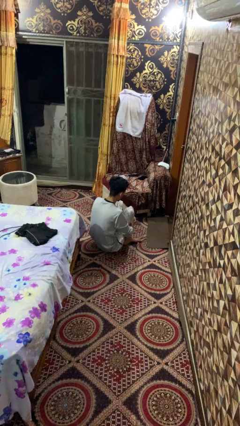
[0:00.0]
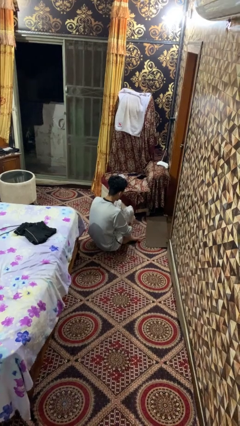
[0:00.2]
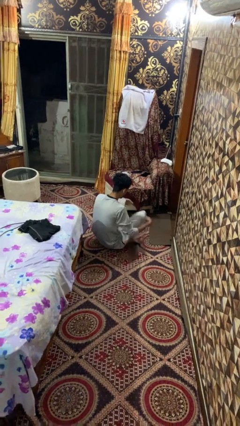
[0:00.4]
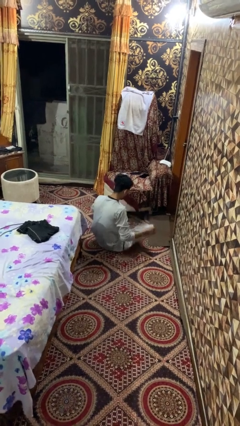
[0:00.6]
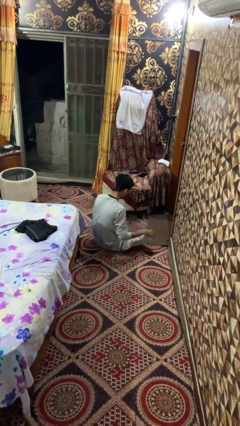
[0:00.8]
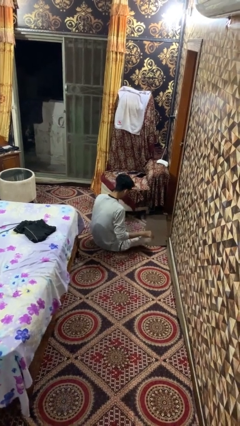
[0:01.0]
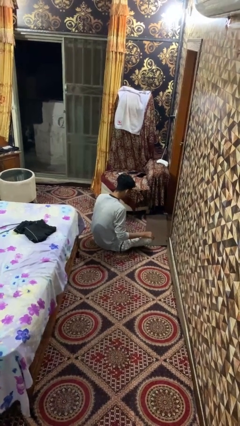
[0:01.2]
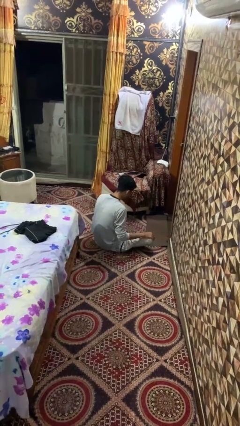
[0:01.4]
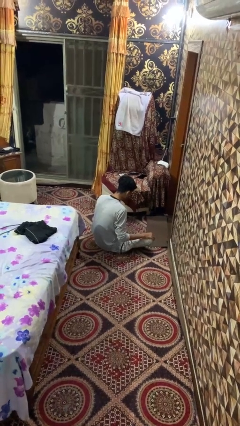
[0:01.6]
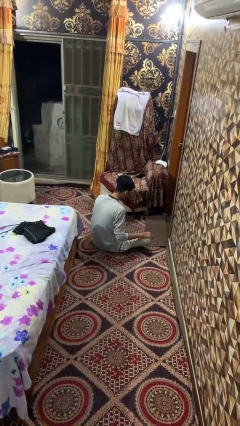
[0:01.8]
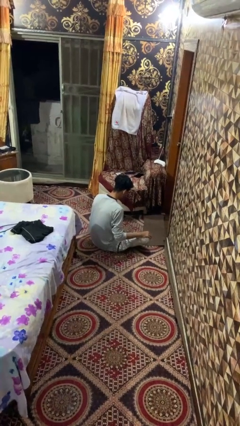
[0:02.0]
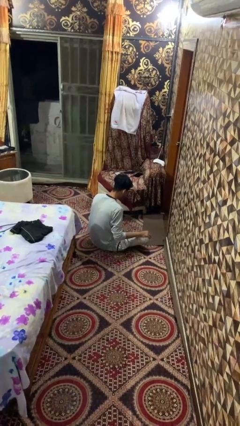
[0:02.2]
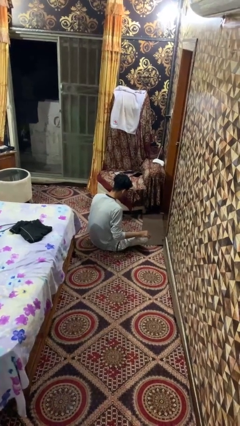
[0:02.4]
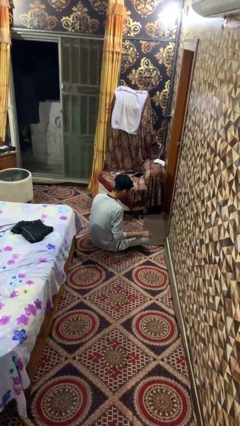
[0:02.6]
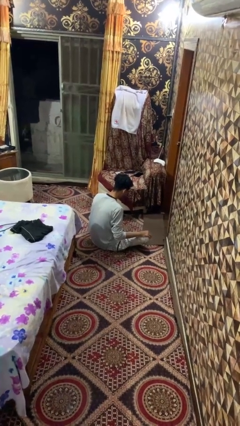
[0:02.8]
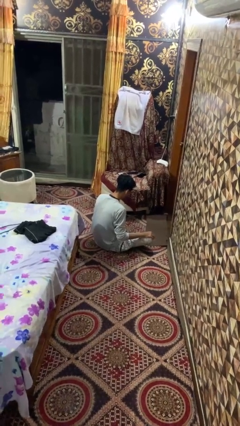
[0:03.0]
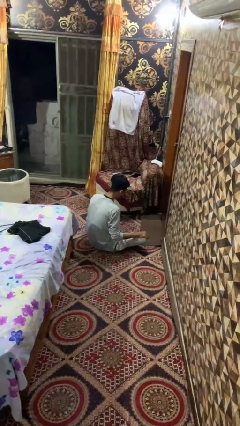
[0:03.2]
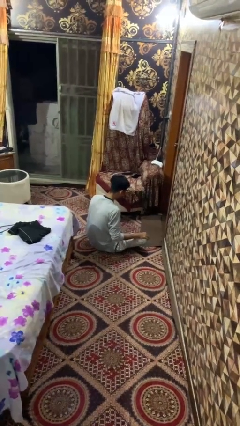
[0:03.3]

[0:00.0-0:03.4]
person crosses legs

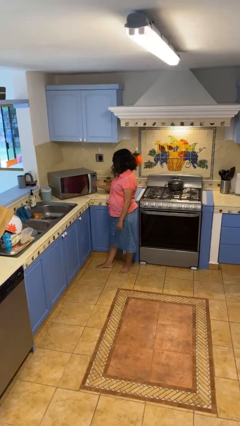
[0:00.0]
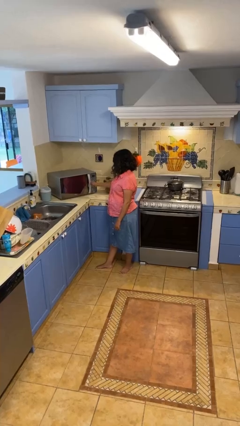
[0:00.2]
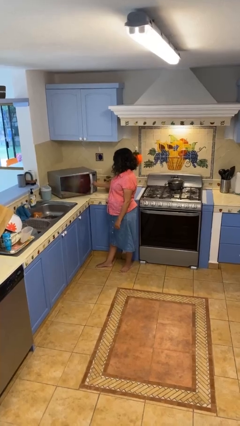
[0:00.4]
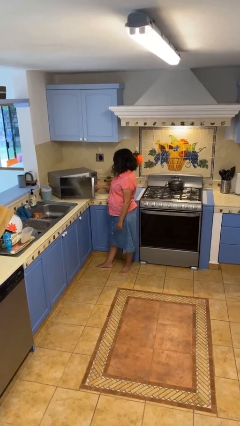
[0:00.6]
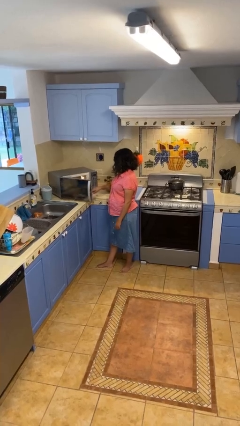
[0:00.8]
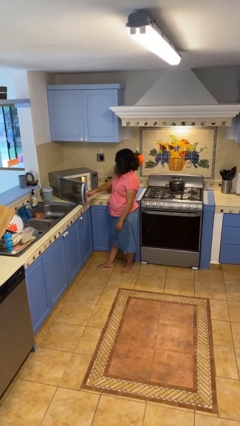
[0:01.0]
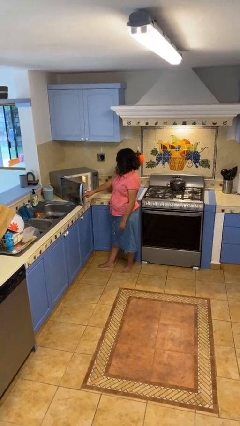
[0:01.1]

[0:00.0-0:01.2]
person opens microwave

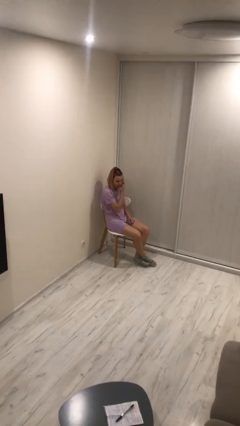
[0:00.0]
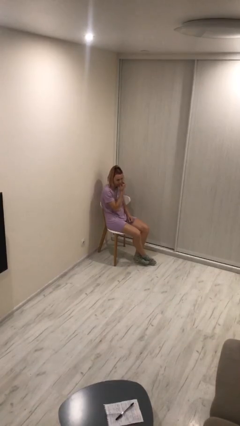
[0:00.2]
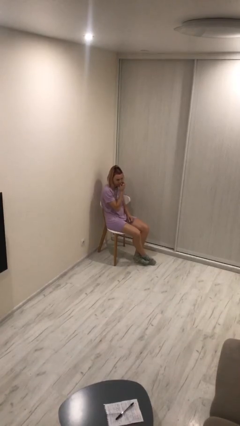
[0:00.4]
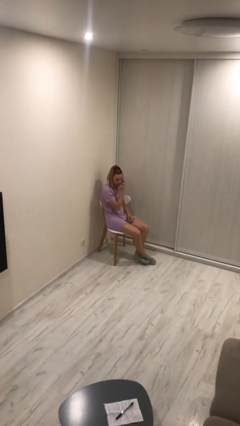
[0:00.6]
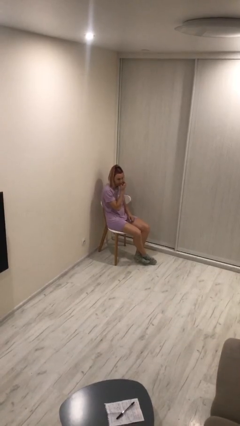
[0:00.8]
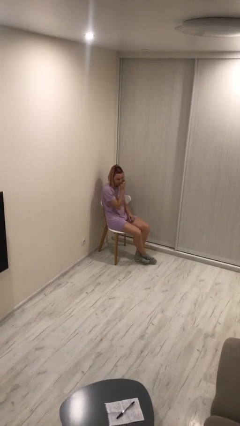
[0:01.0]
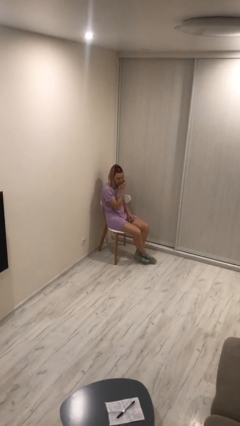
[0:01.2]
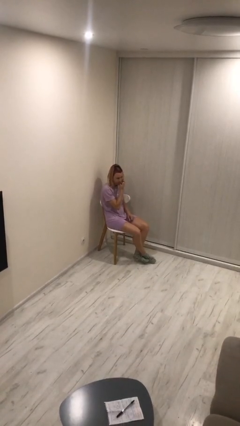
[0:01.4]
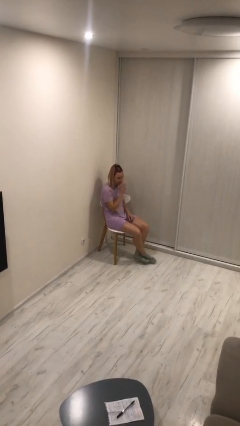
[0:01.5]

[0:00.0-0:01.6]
person scratches face

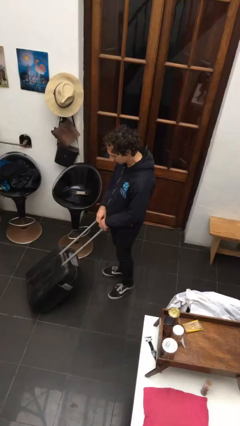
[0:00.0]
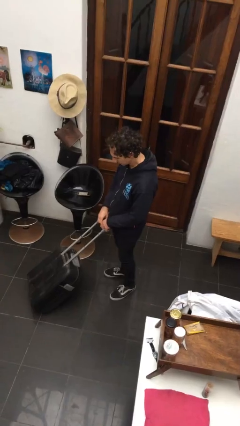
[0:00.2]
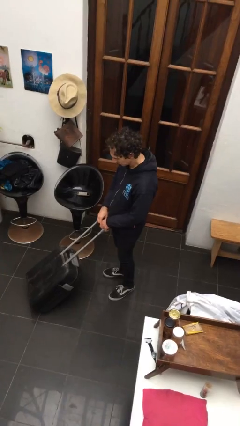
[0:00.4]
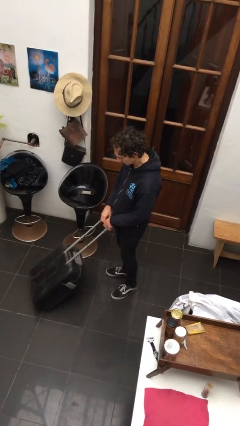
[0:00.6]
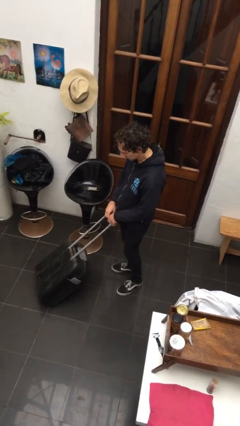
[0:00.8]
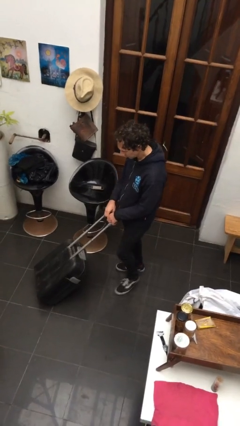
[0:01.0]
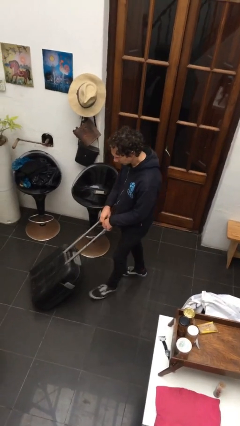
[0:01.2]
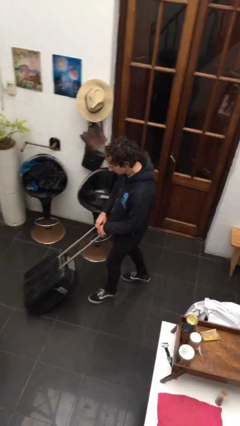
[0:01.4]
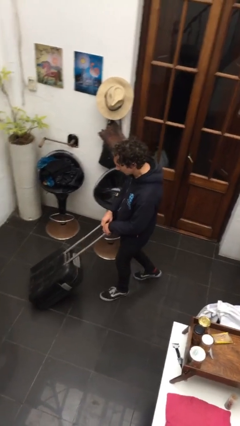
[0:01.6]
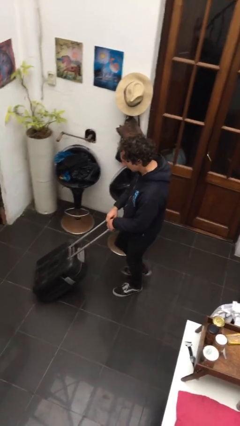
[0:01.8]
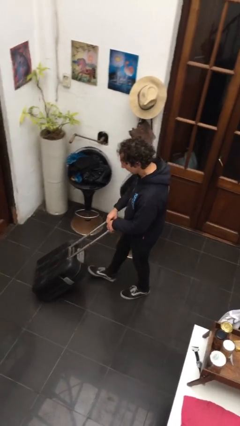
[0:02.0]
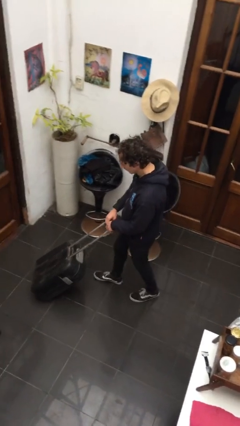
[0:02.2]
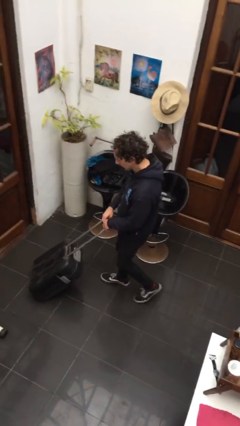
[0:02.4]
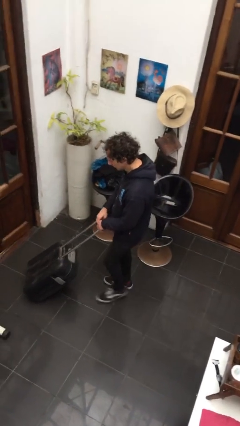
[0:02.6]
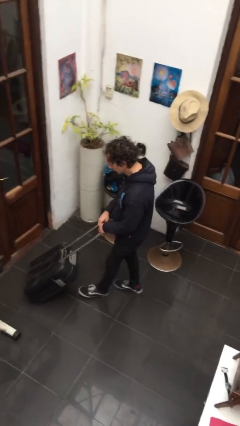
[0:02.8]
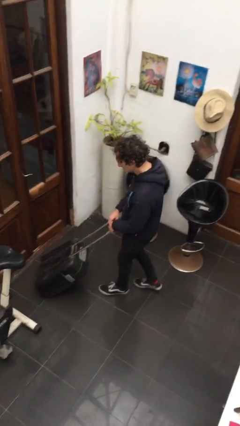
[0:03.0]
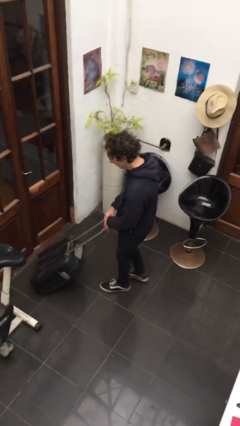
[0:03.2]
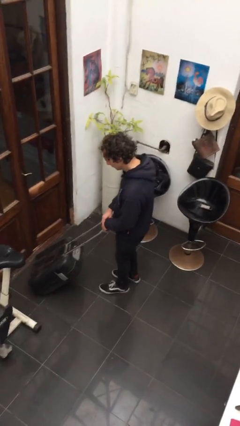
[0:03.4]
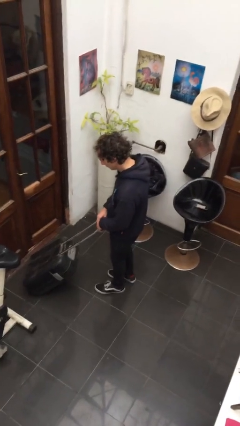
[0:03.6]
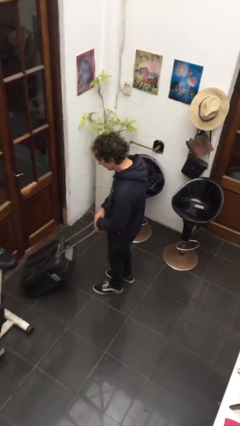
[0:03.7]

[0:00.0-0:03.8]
person pushes wheeled cart

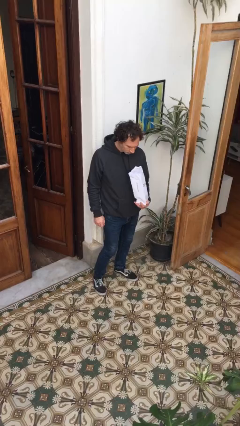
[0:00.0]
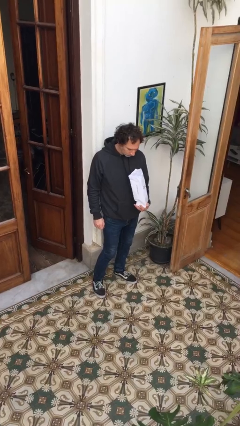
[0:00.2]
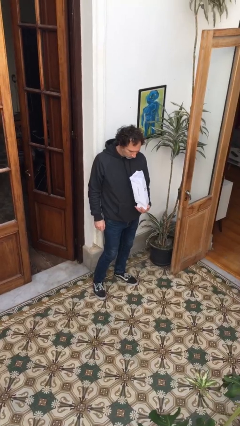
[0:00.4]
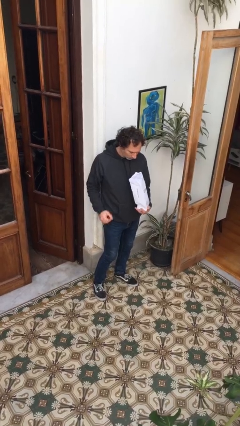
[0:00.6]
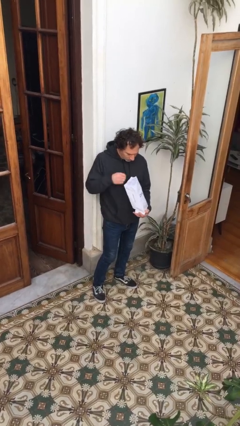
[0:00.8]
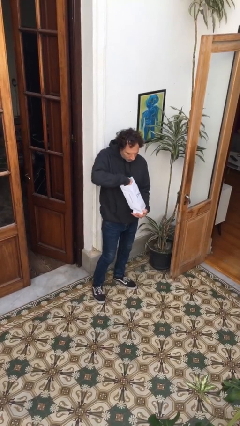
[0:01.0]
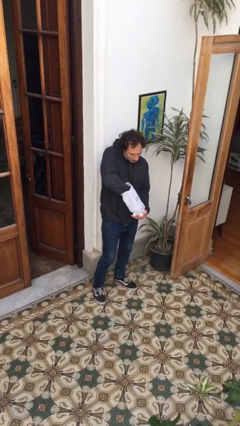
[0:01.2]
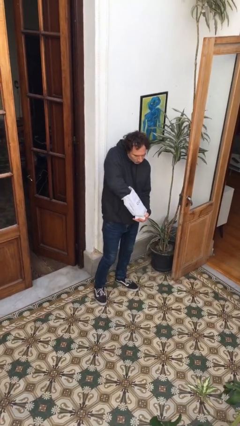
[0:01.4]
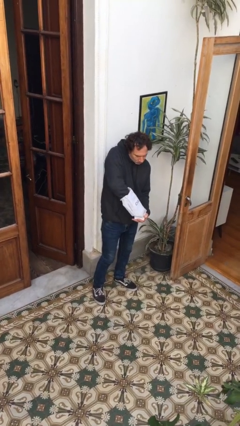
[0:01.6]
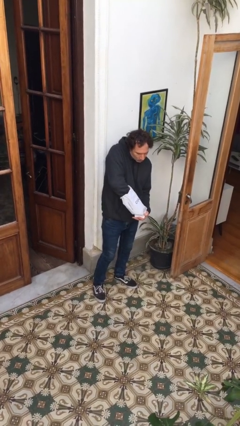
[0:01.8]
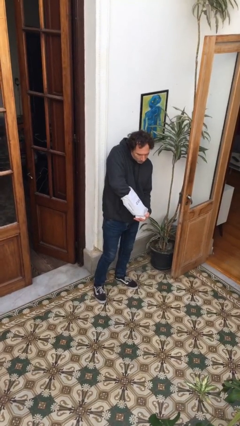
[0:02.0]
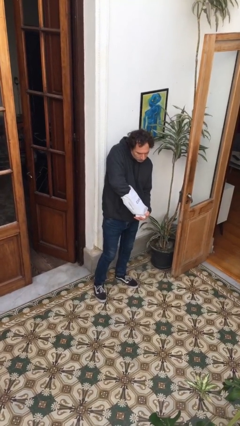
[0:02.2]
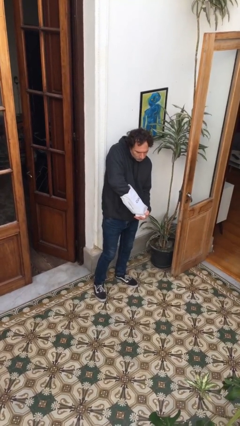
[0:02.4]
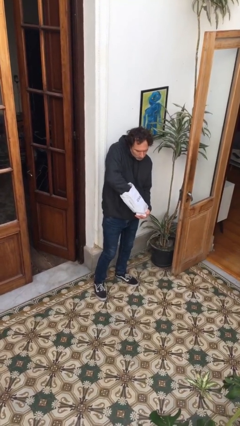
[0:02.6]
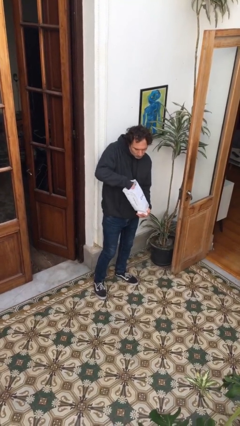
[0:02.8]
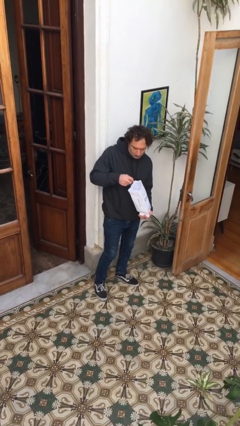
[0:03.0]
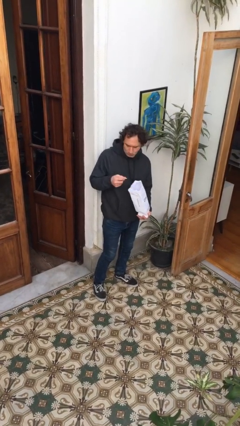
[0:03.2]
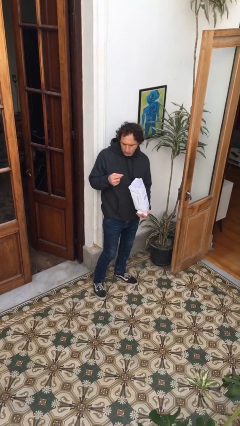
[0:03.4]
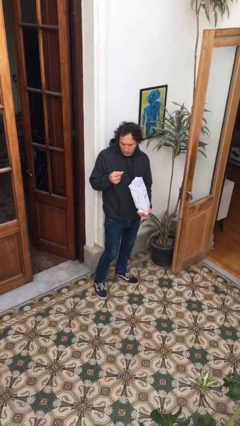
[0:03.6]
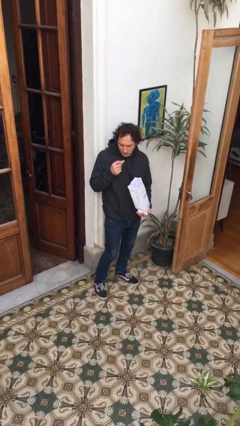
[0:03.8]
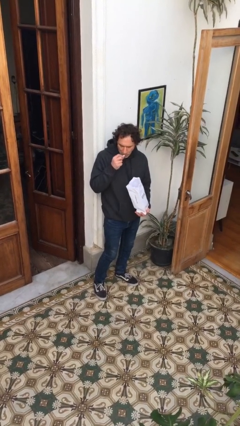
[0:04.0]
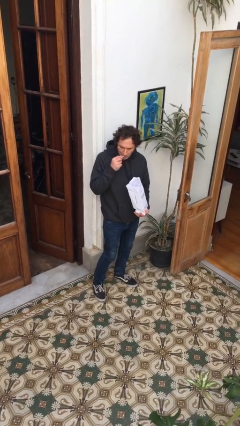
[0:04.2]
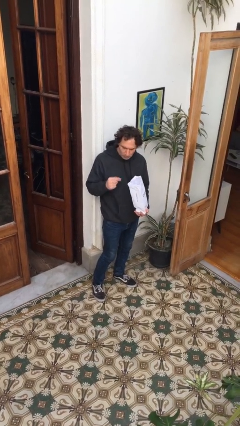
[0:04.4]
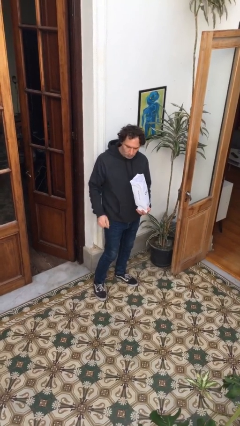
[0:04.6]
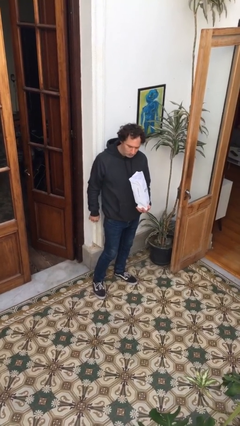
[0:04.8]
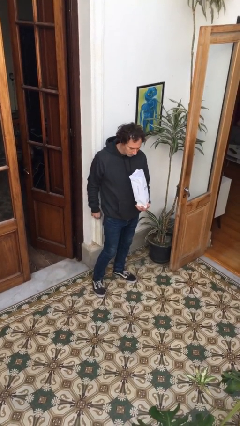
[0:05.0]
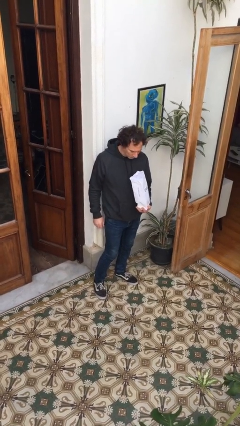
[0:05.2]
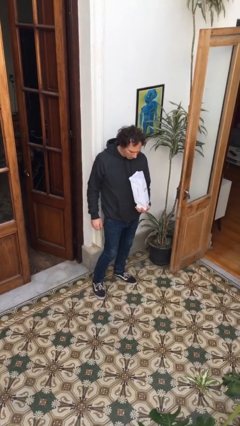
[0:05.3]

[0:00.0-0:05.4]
person eats snack from bag

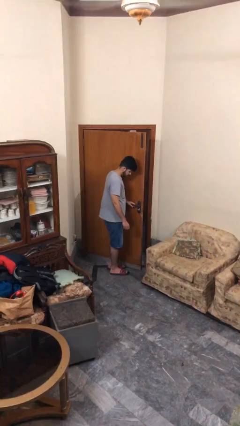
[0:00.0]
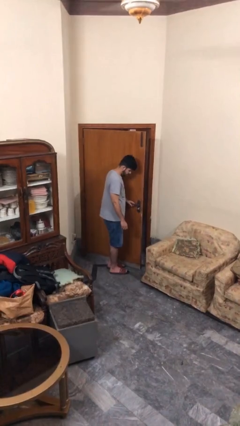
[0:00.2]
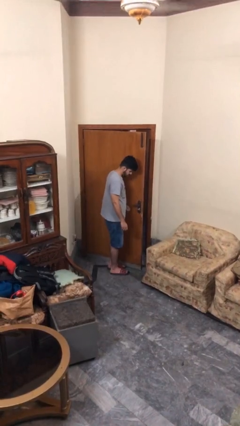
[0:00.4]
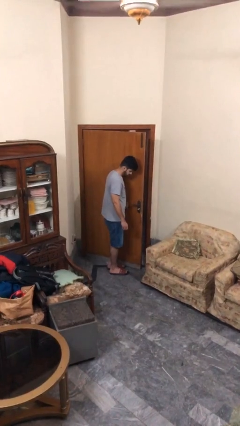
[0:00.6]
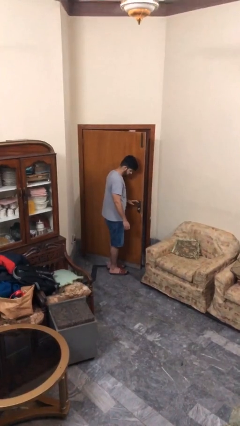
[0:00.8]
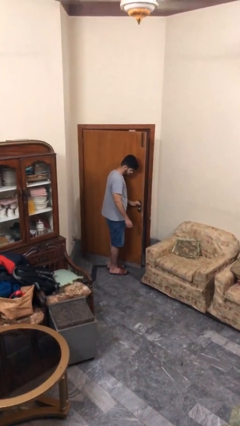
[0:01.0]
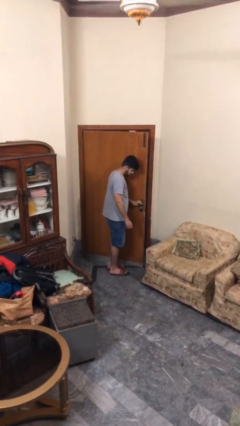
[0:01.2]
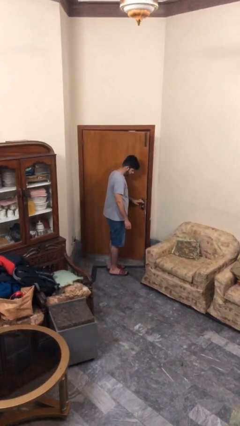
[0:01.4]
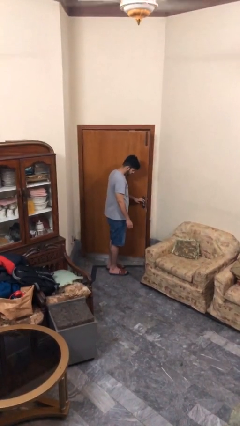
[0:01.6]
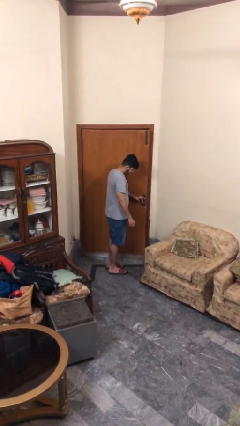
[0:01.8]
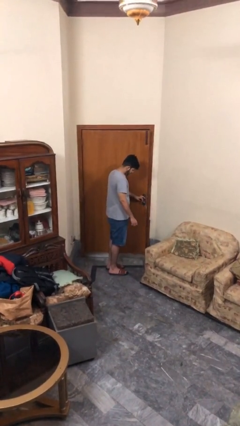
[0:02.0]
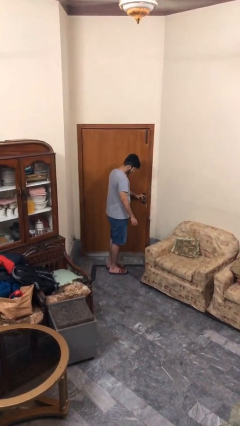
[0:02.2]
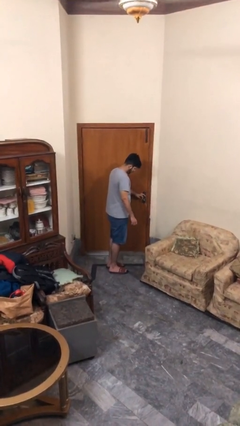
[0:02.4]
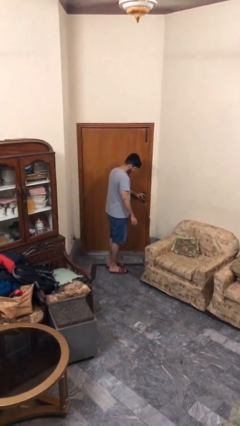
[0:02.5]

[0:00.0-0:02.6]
person closes facility door
